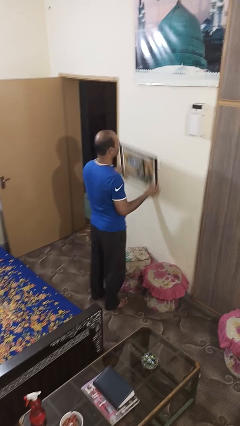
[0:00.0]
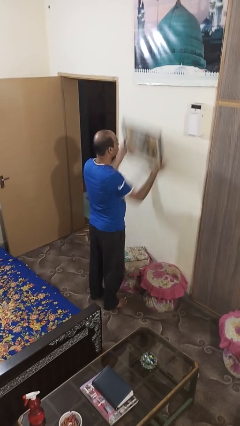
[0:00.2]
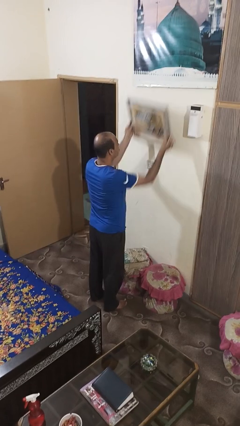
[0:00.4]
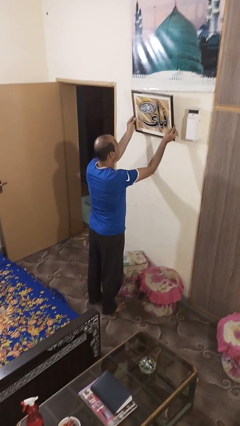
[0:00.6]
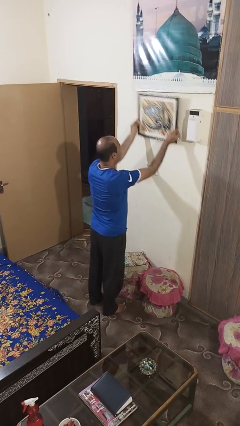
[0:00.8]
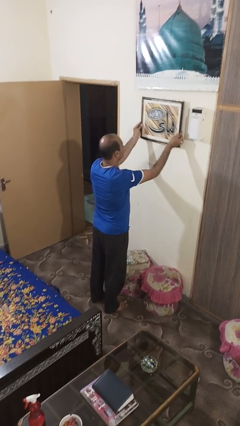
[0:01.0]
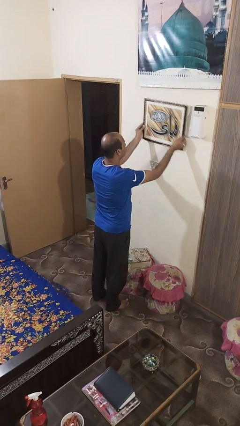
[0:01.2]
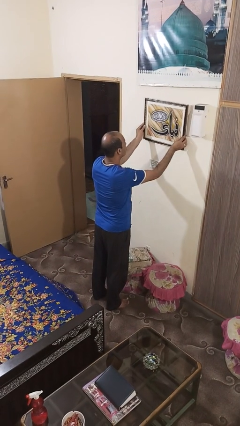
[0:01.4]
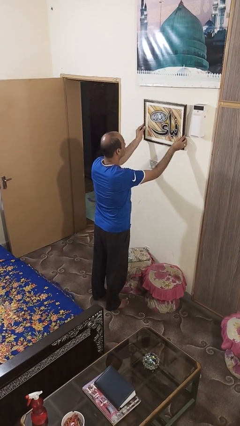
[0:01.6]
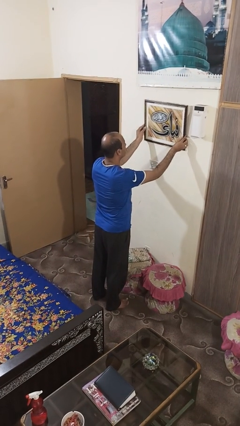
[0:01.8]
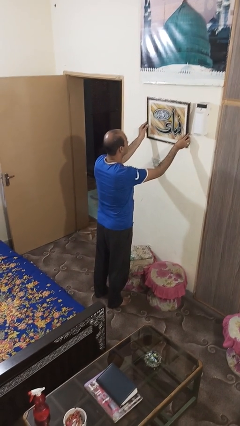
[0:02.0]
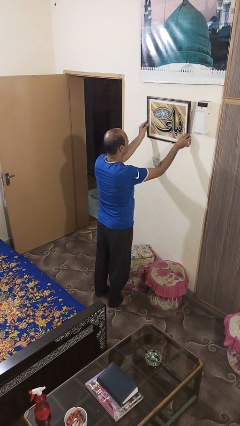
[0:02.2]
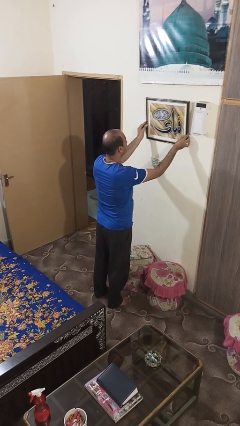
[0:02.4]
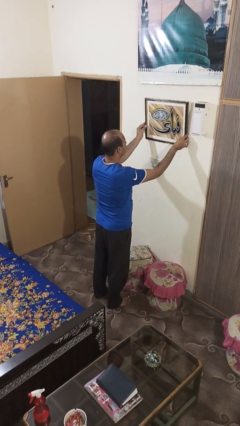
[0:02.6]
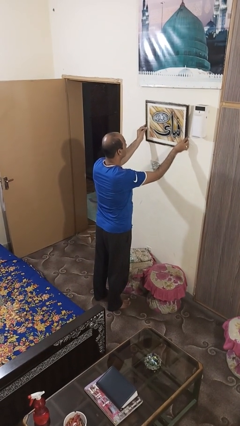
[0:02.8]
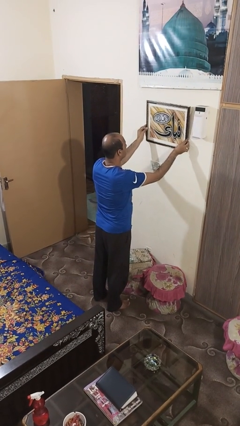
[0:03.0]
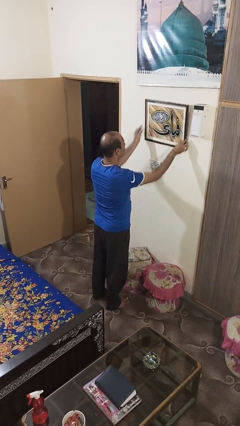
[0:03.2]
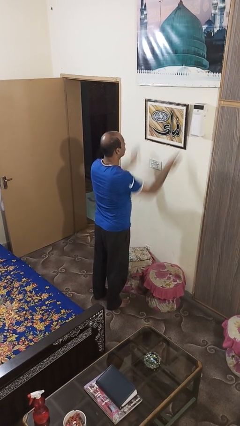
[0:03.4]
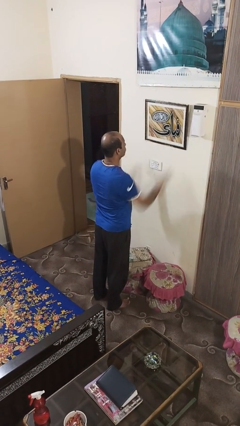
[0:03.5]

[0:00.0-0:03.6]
person puts up picture frame

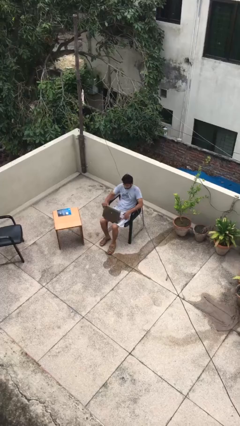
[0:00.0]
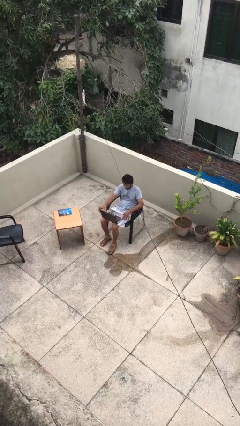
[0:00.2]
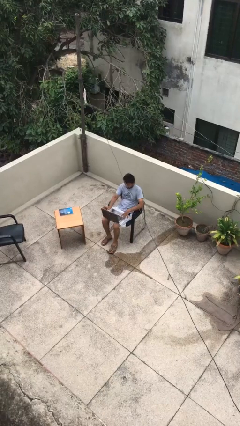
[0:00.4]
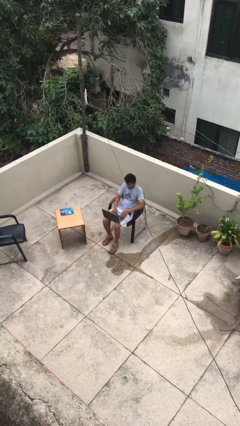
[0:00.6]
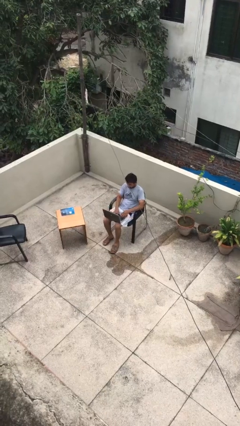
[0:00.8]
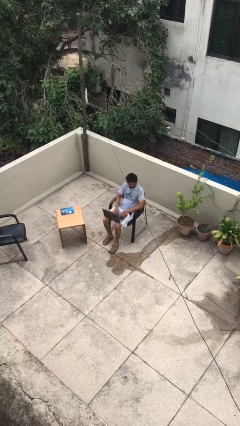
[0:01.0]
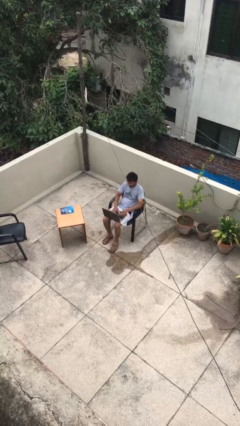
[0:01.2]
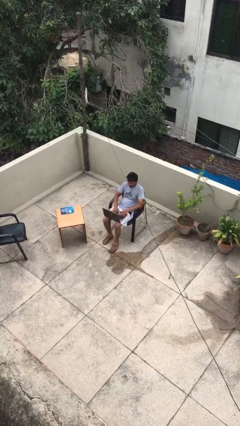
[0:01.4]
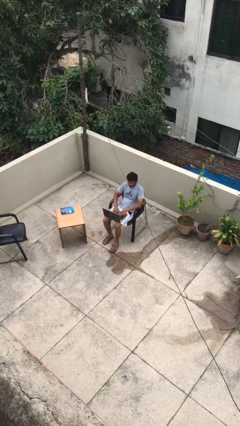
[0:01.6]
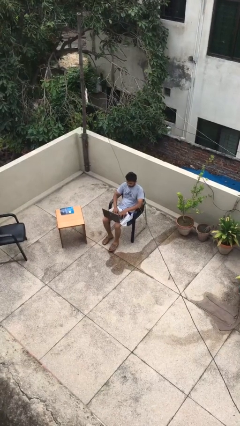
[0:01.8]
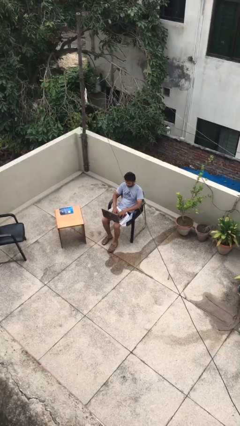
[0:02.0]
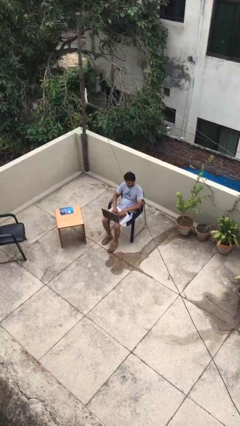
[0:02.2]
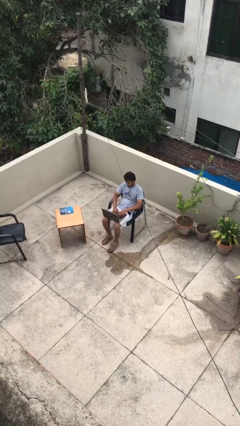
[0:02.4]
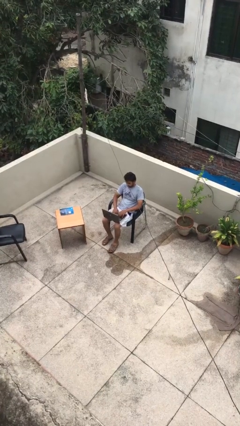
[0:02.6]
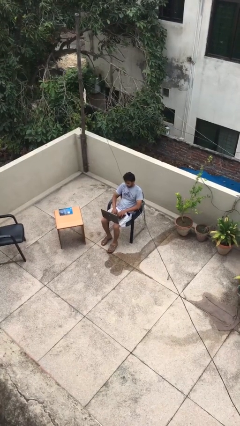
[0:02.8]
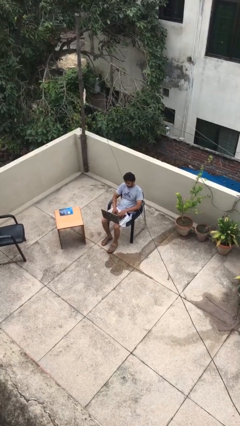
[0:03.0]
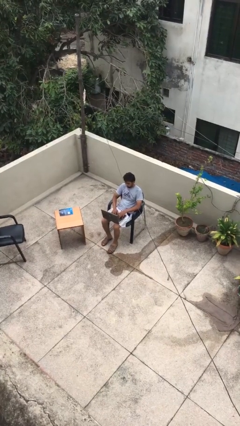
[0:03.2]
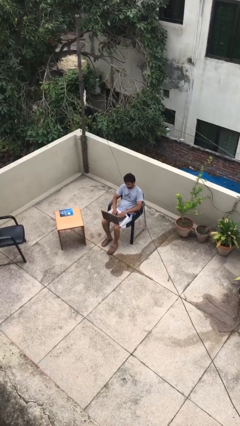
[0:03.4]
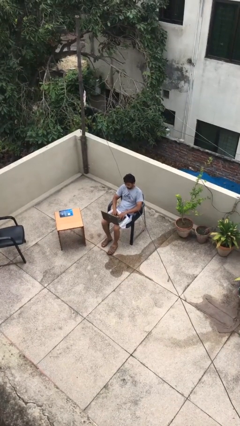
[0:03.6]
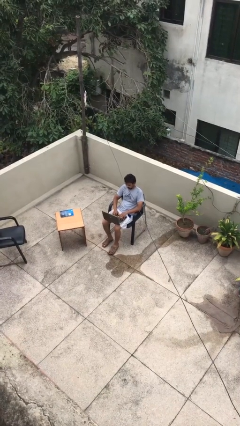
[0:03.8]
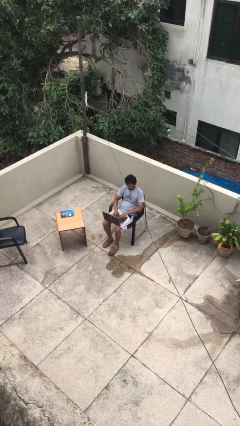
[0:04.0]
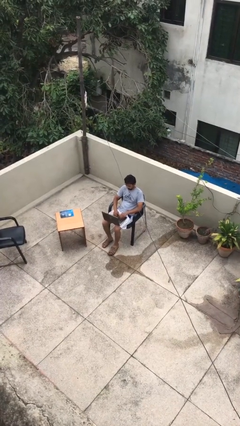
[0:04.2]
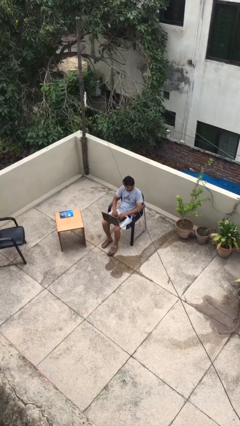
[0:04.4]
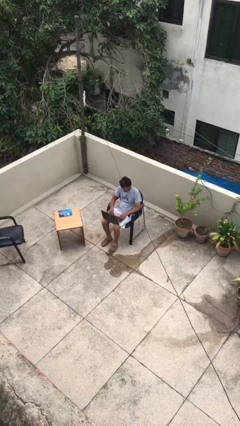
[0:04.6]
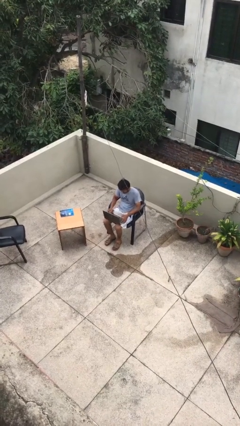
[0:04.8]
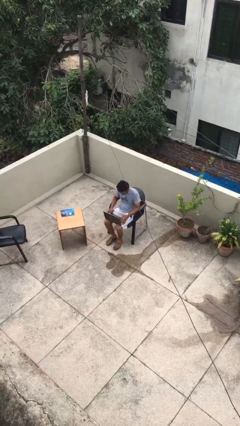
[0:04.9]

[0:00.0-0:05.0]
person interacts with laptop

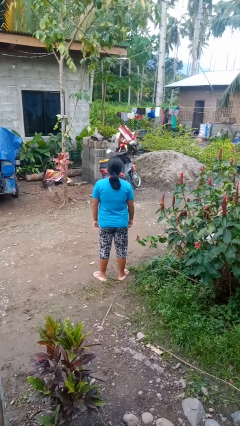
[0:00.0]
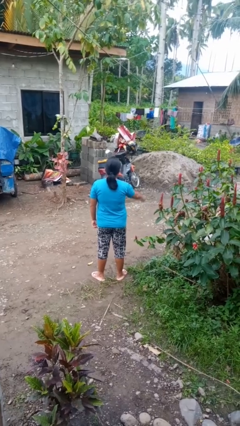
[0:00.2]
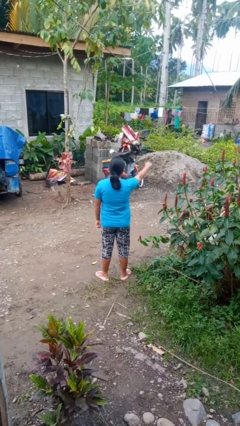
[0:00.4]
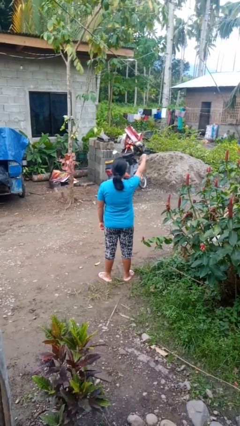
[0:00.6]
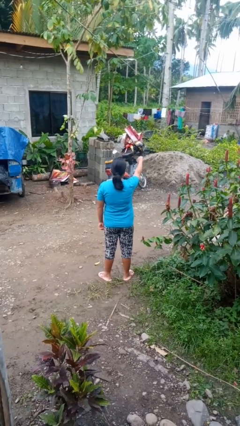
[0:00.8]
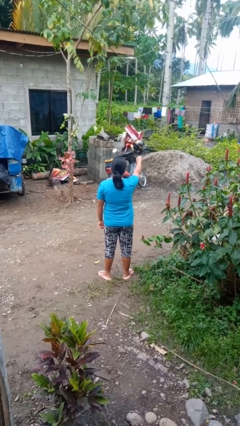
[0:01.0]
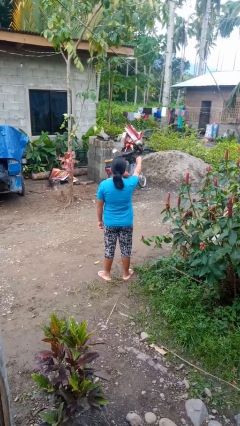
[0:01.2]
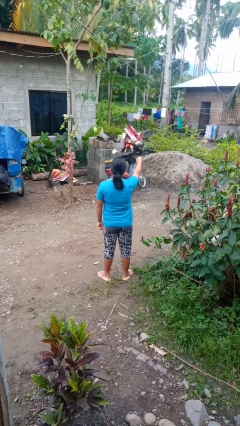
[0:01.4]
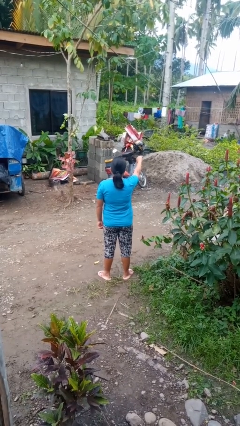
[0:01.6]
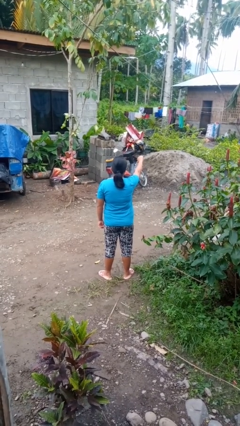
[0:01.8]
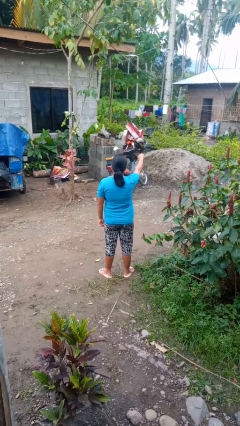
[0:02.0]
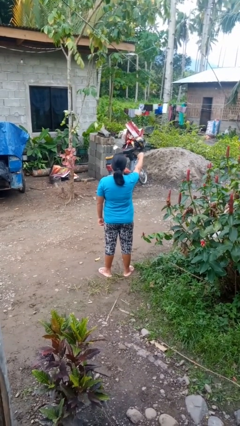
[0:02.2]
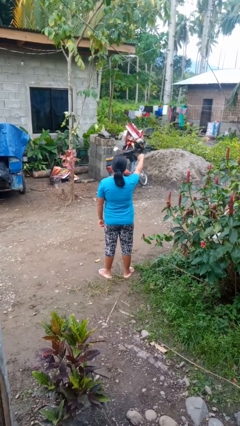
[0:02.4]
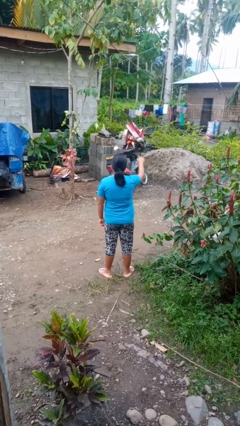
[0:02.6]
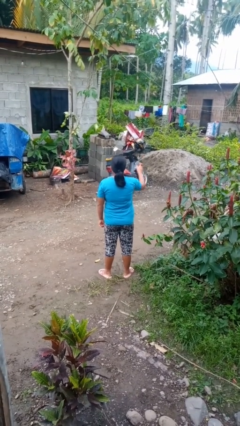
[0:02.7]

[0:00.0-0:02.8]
person gestures thumbs down

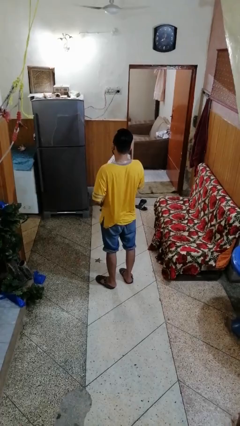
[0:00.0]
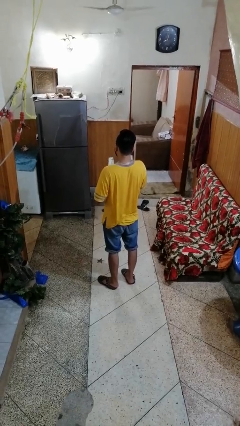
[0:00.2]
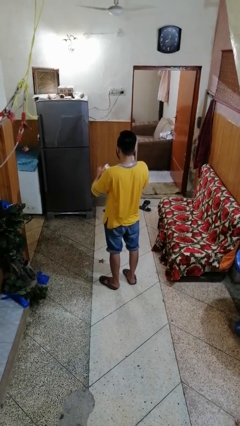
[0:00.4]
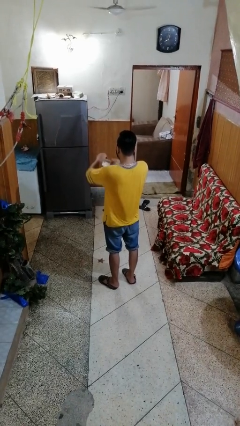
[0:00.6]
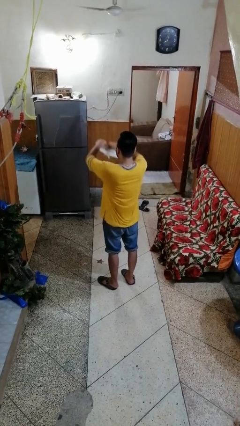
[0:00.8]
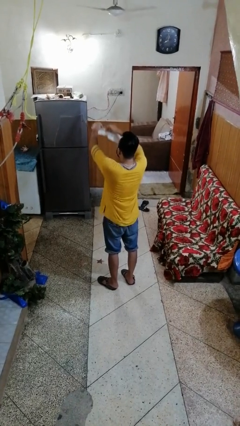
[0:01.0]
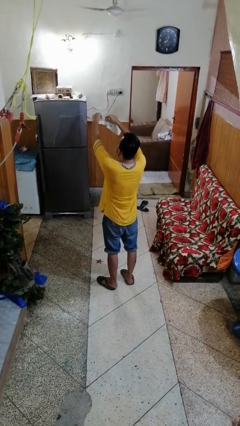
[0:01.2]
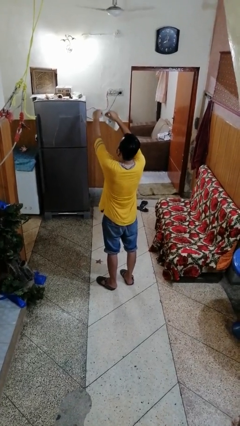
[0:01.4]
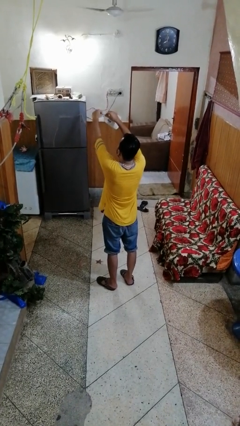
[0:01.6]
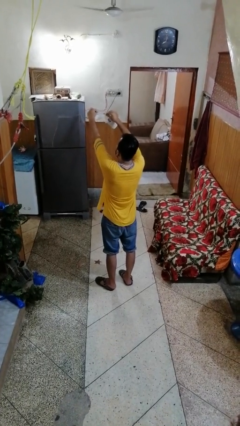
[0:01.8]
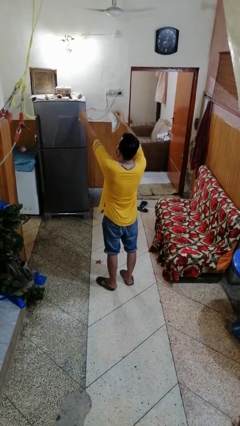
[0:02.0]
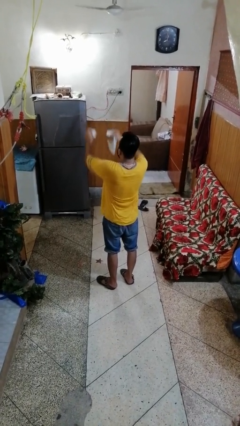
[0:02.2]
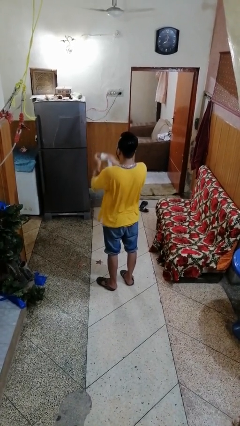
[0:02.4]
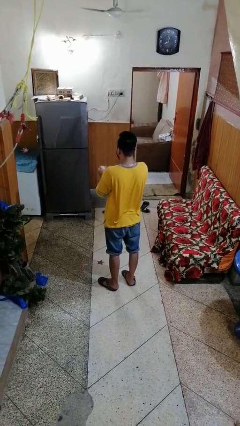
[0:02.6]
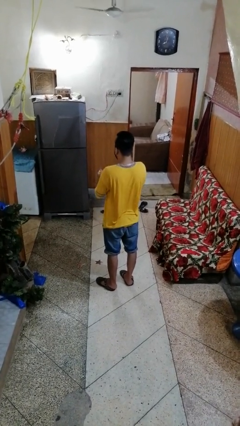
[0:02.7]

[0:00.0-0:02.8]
person tears paper

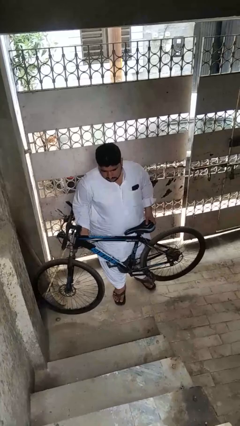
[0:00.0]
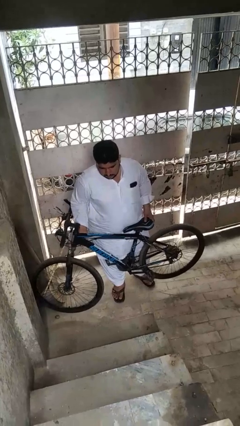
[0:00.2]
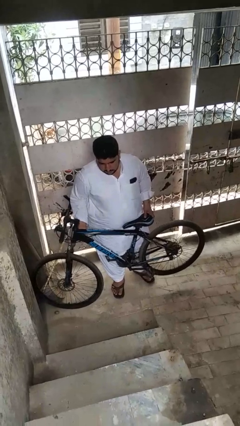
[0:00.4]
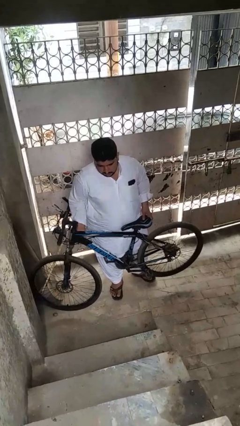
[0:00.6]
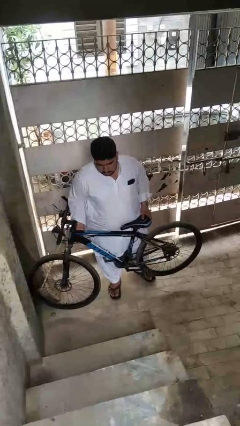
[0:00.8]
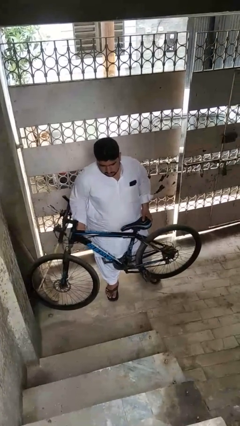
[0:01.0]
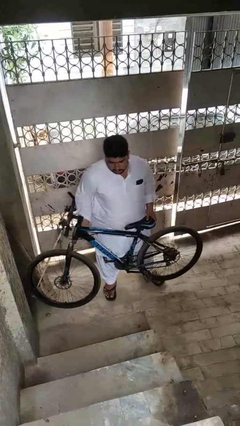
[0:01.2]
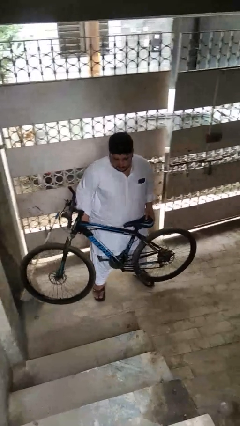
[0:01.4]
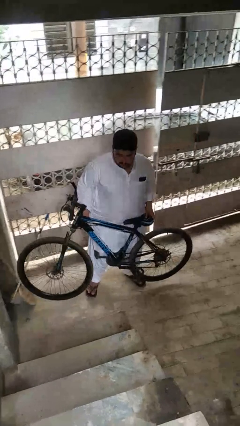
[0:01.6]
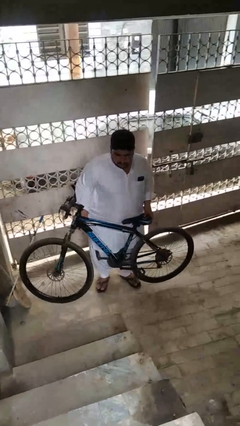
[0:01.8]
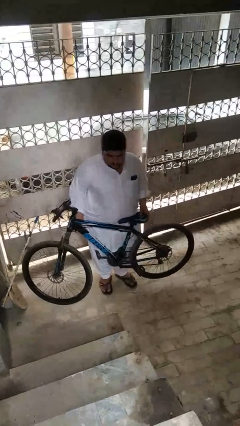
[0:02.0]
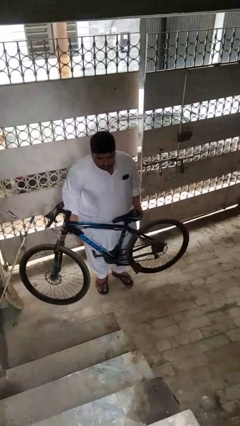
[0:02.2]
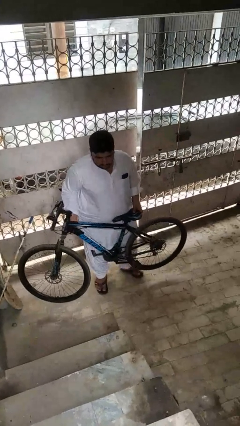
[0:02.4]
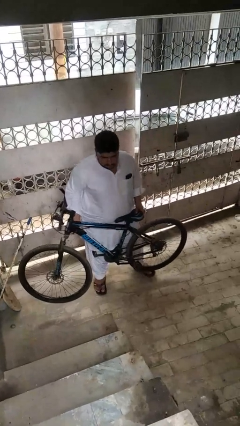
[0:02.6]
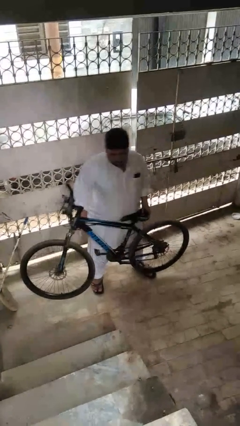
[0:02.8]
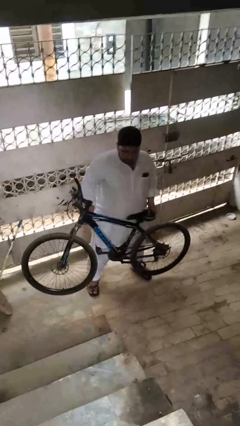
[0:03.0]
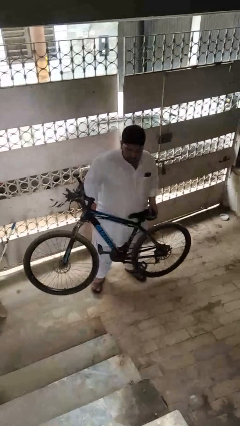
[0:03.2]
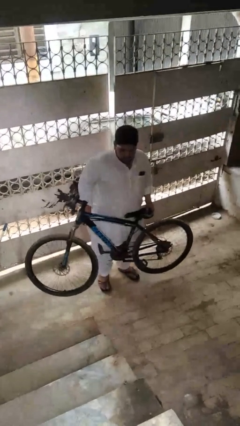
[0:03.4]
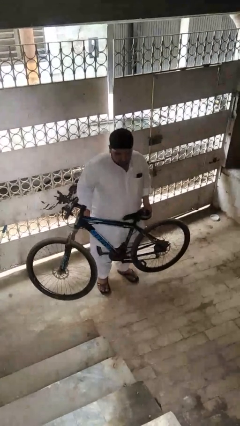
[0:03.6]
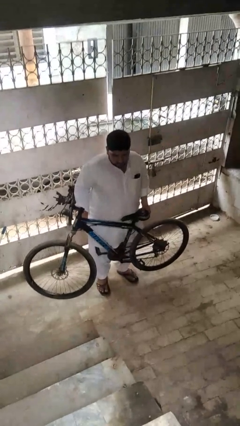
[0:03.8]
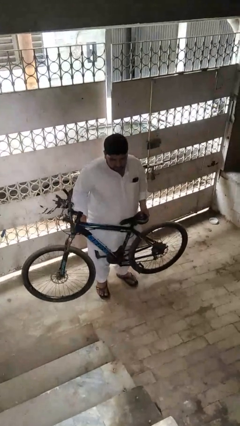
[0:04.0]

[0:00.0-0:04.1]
person carries bicycle
